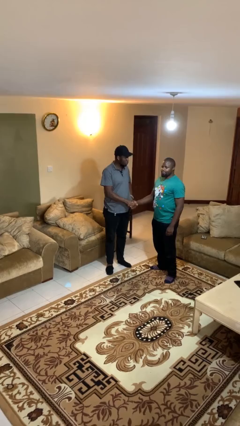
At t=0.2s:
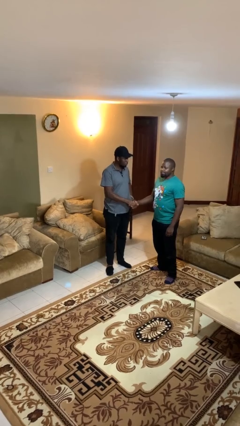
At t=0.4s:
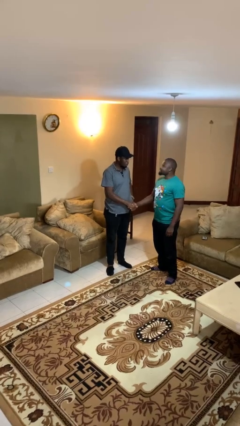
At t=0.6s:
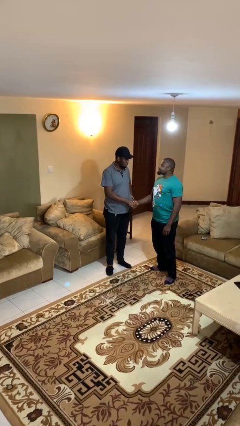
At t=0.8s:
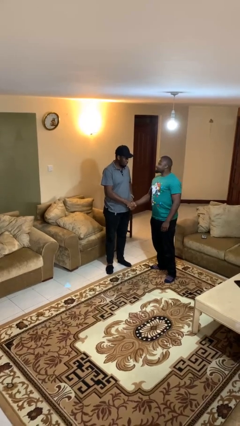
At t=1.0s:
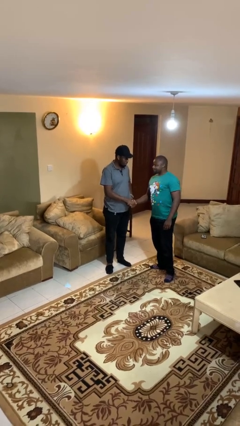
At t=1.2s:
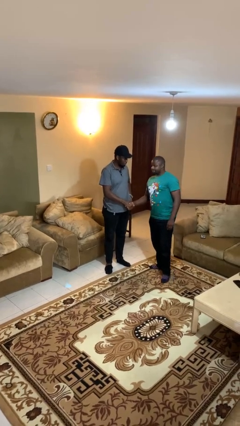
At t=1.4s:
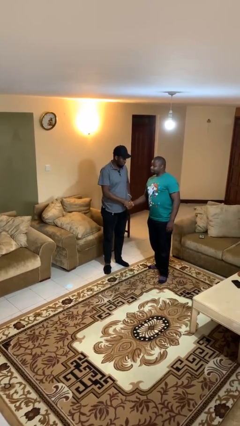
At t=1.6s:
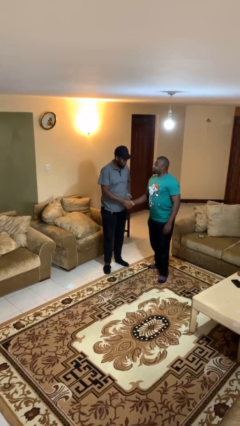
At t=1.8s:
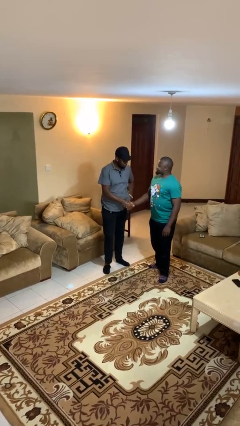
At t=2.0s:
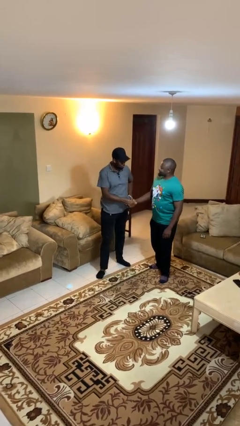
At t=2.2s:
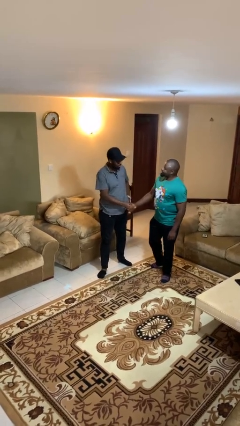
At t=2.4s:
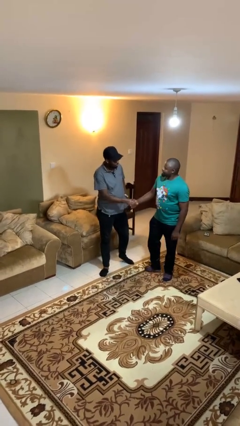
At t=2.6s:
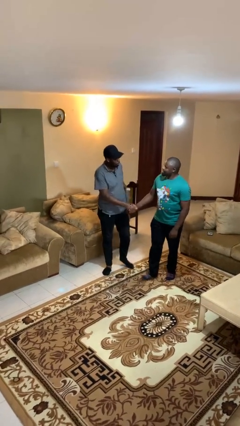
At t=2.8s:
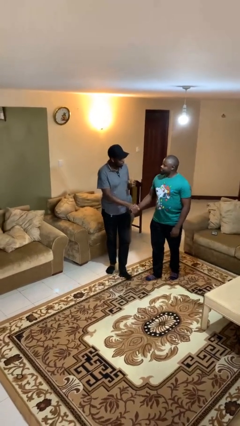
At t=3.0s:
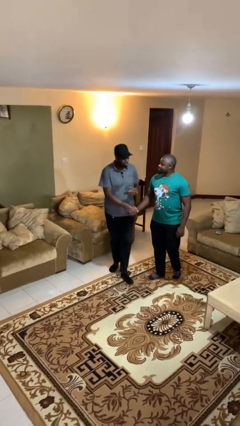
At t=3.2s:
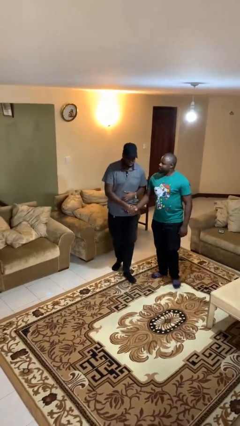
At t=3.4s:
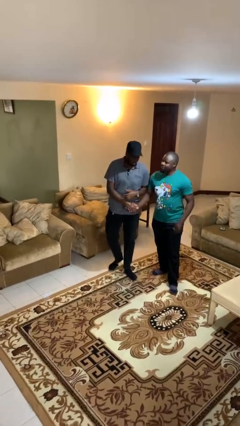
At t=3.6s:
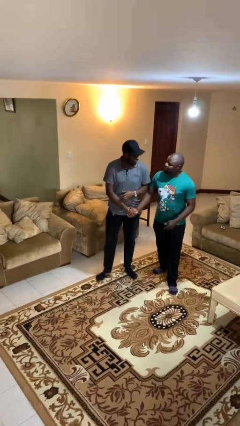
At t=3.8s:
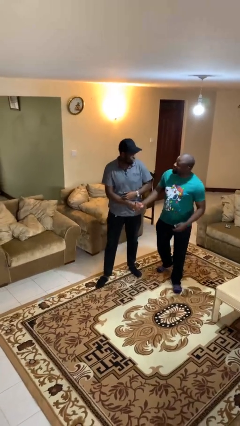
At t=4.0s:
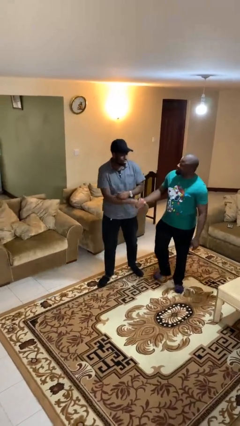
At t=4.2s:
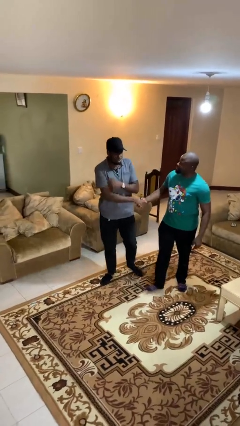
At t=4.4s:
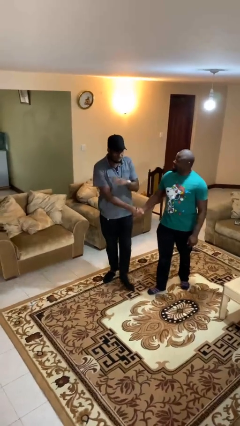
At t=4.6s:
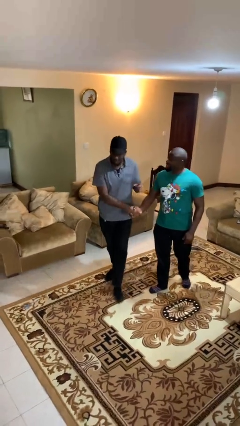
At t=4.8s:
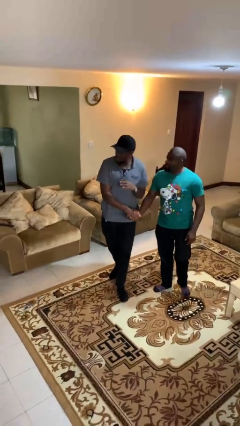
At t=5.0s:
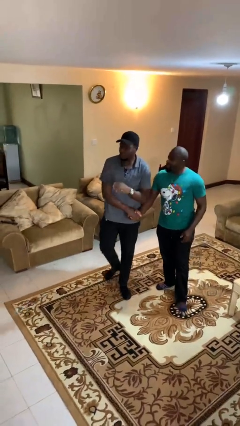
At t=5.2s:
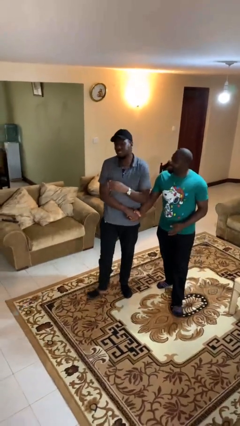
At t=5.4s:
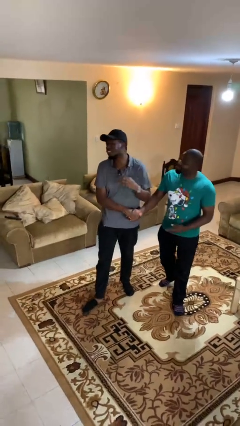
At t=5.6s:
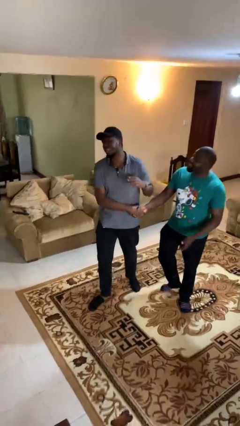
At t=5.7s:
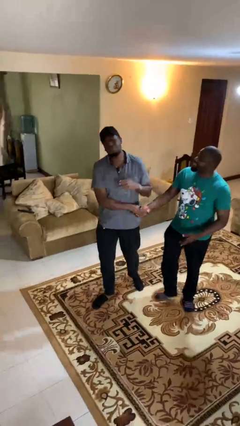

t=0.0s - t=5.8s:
person holds hand

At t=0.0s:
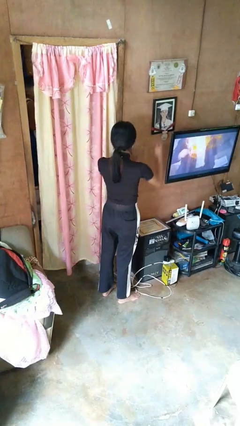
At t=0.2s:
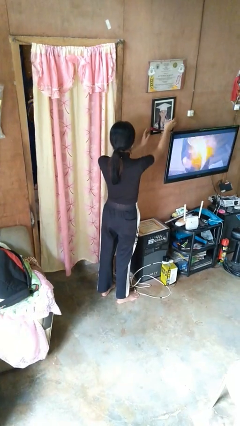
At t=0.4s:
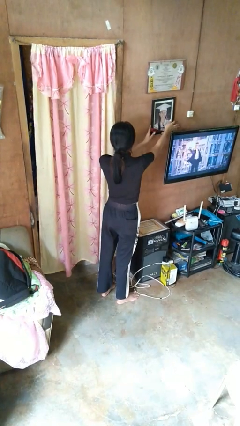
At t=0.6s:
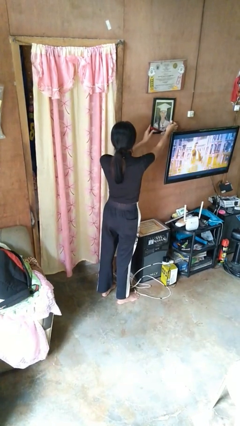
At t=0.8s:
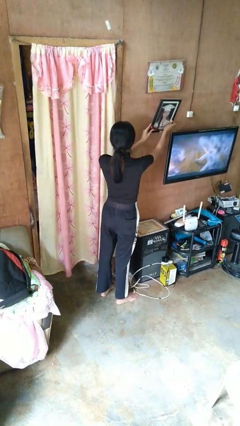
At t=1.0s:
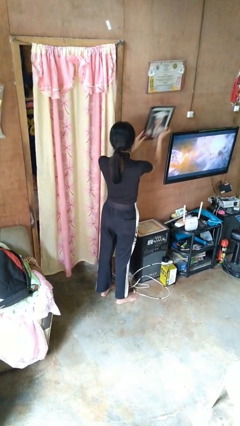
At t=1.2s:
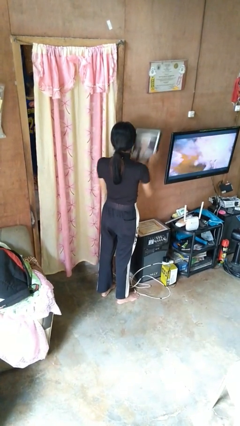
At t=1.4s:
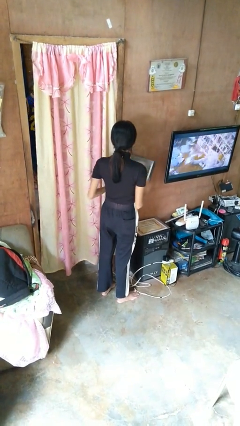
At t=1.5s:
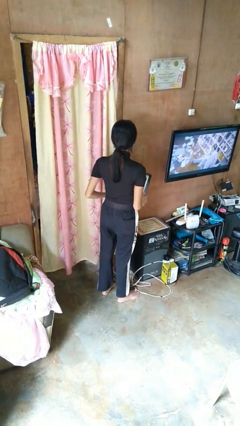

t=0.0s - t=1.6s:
person takes down picture frame

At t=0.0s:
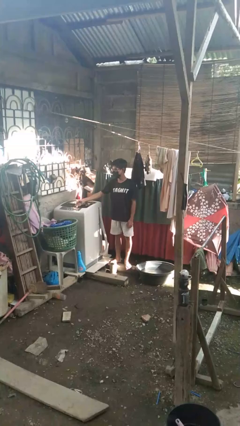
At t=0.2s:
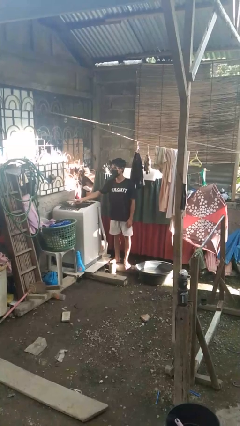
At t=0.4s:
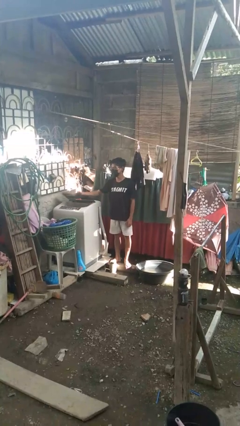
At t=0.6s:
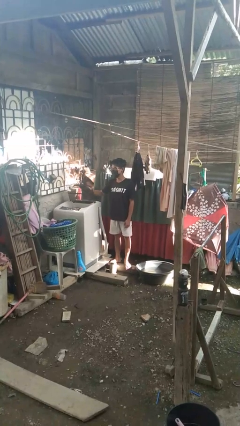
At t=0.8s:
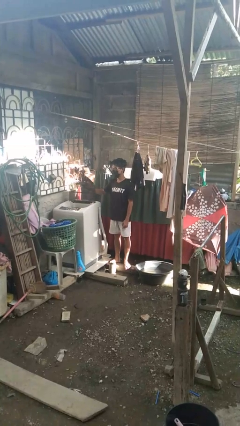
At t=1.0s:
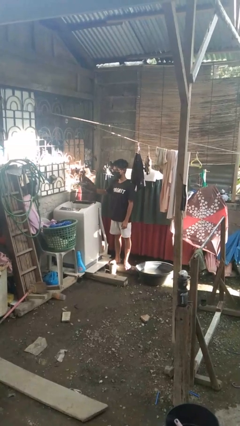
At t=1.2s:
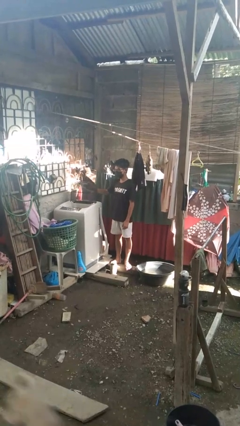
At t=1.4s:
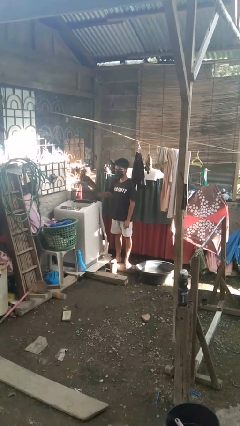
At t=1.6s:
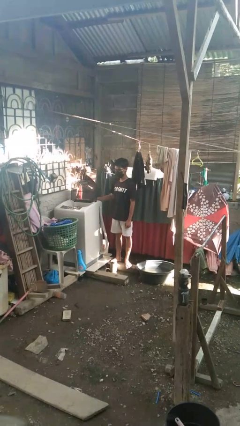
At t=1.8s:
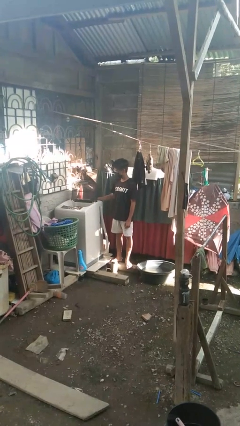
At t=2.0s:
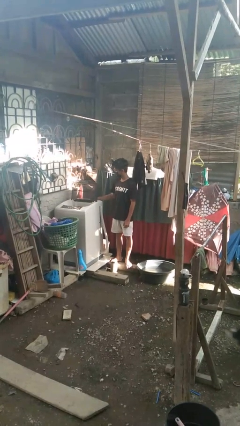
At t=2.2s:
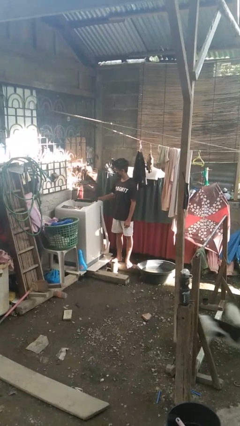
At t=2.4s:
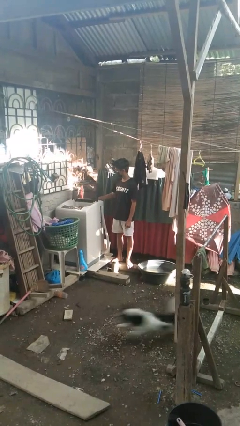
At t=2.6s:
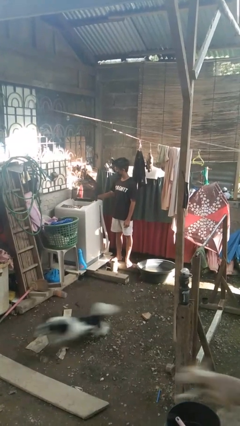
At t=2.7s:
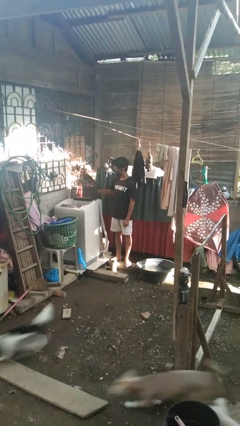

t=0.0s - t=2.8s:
person opens clothes washer

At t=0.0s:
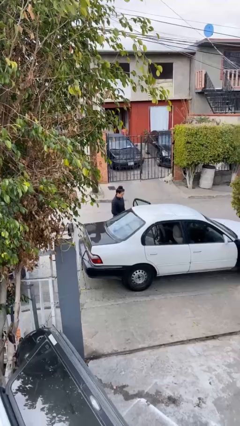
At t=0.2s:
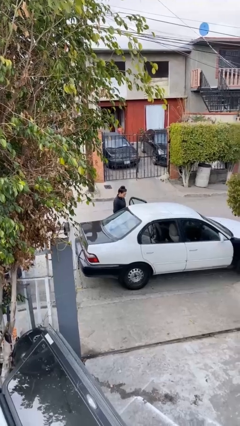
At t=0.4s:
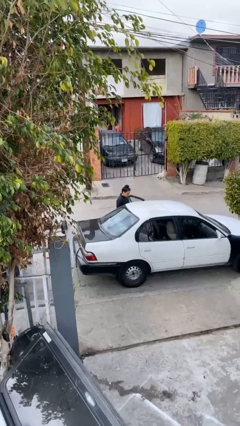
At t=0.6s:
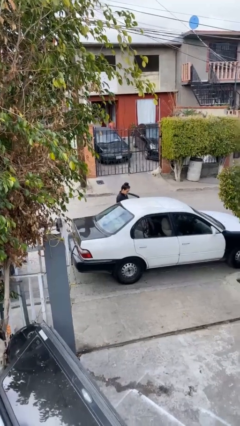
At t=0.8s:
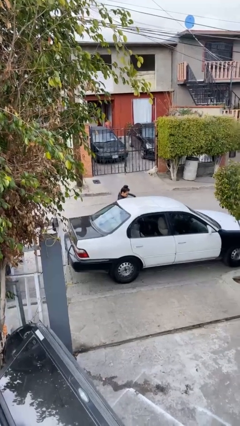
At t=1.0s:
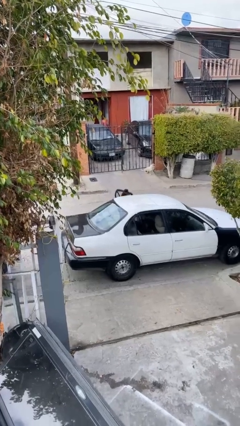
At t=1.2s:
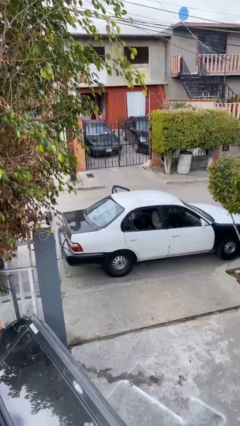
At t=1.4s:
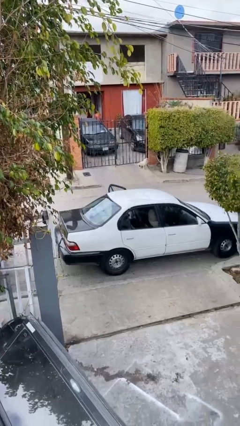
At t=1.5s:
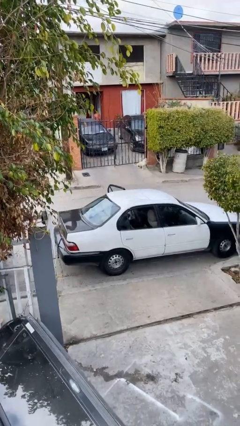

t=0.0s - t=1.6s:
person enters car

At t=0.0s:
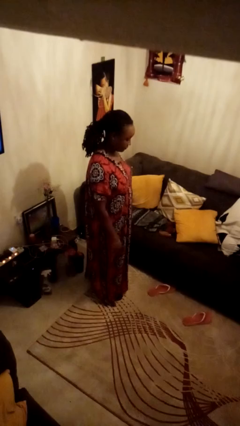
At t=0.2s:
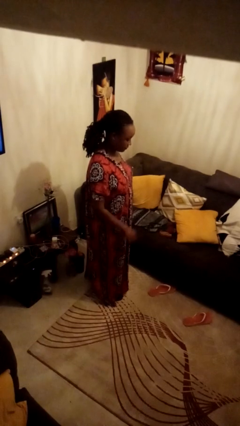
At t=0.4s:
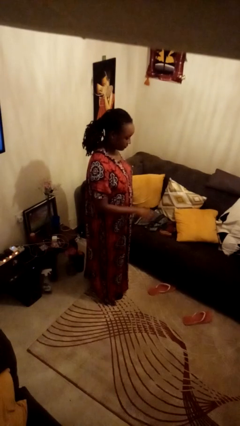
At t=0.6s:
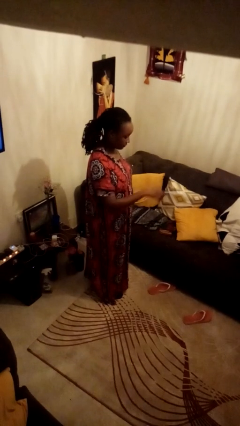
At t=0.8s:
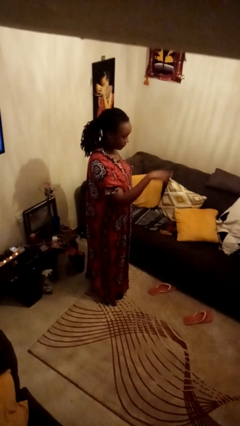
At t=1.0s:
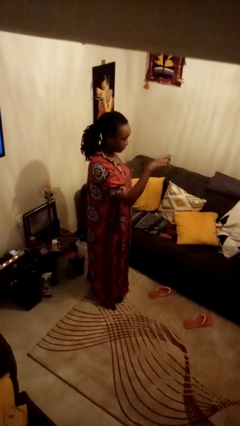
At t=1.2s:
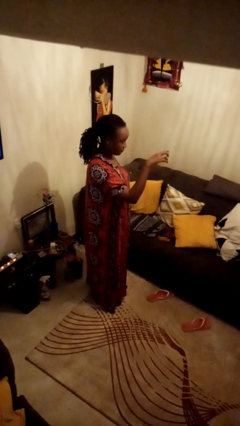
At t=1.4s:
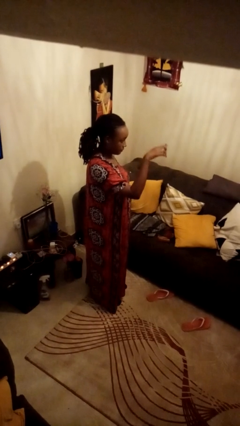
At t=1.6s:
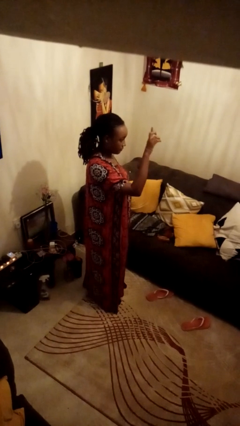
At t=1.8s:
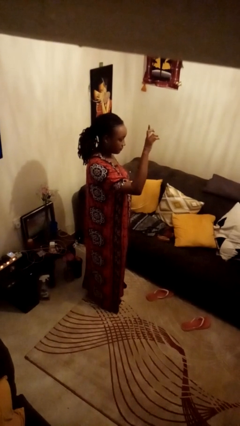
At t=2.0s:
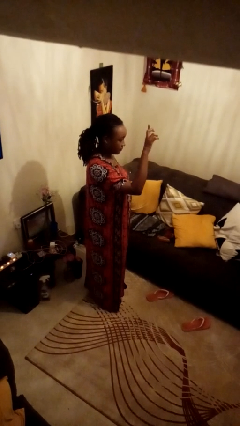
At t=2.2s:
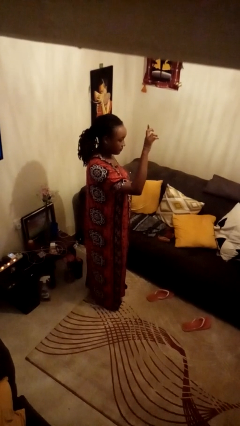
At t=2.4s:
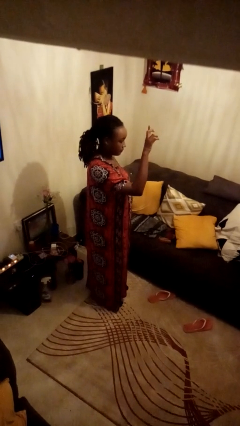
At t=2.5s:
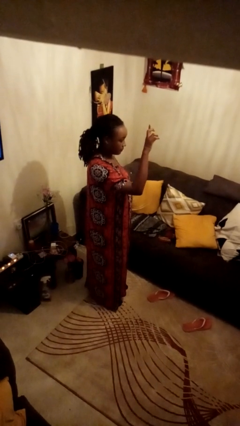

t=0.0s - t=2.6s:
person gestures swipe up

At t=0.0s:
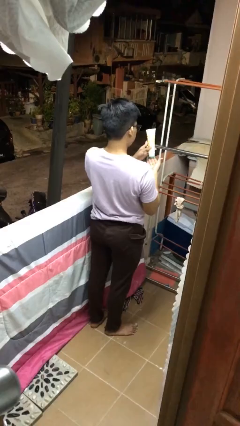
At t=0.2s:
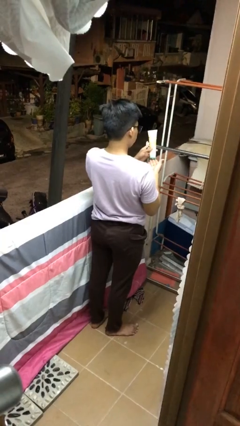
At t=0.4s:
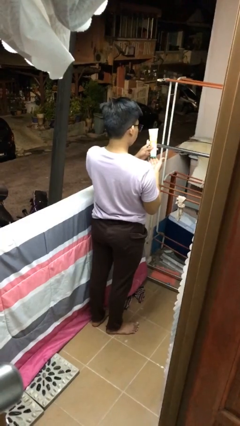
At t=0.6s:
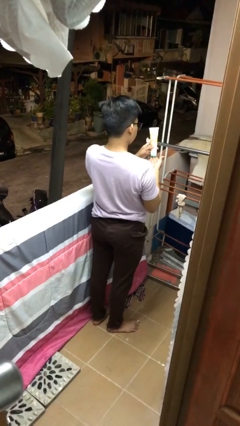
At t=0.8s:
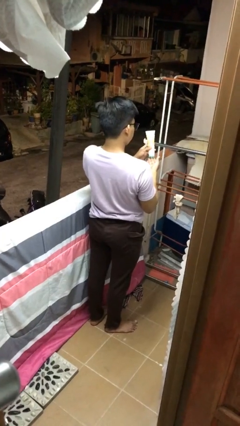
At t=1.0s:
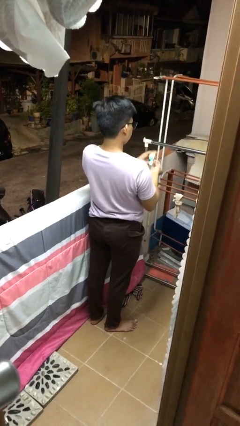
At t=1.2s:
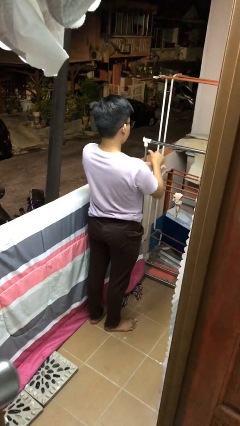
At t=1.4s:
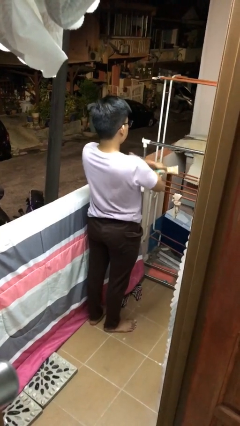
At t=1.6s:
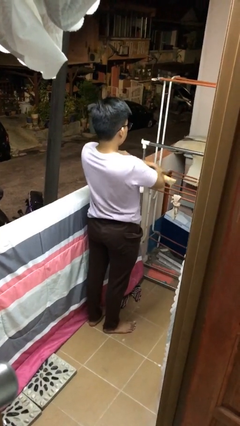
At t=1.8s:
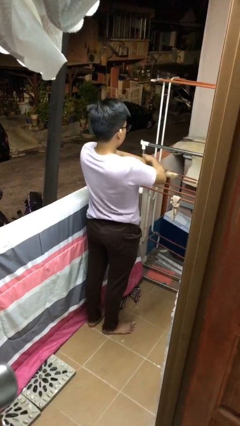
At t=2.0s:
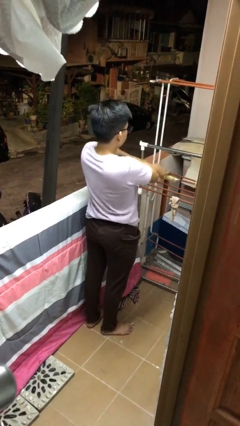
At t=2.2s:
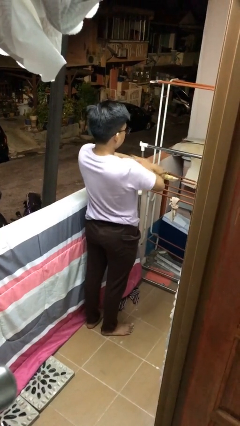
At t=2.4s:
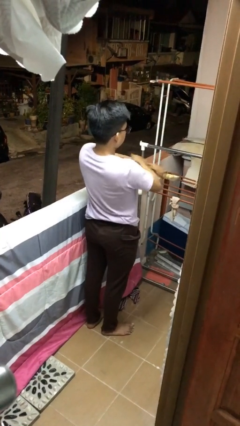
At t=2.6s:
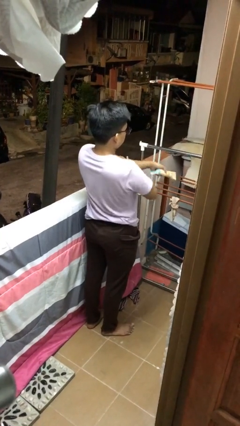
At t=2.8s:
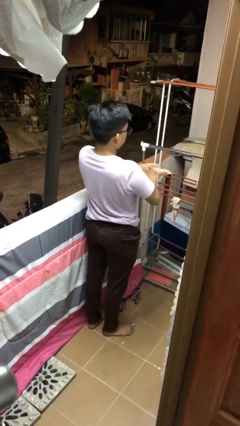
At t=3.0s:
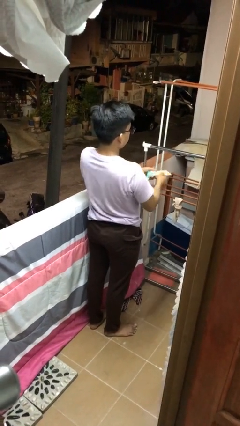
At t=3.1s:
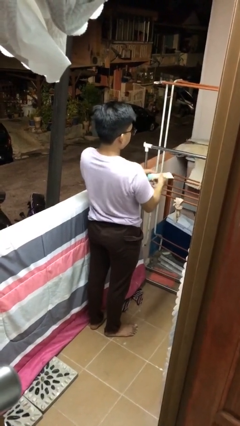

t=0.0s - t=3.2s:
person applies sunscreen
